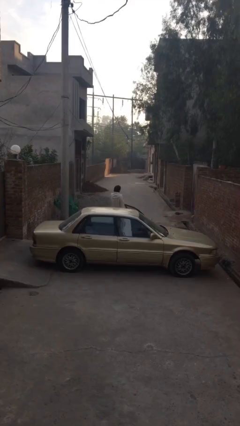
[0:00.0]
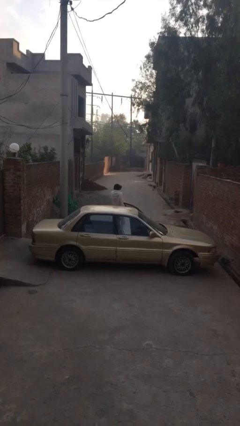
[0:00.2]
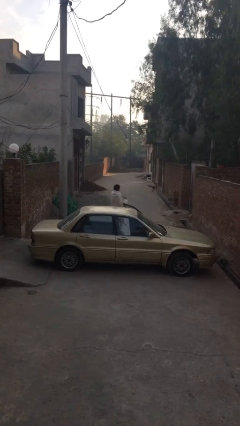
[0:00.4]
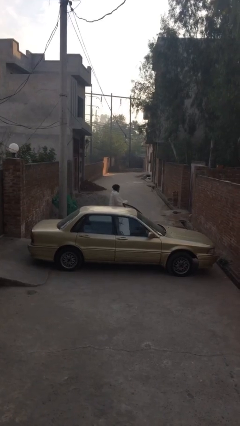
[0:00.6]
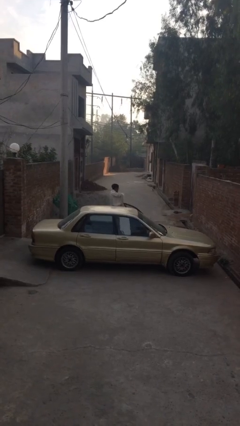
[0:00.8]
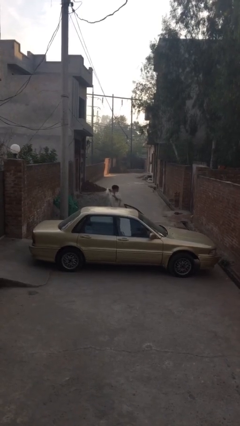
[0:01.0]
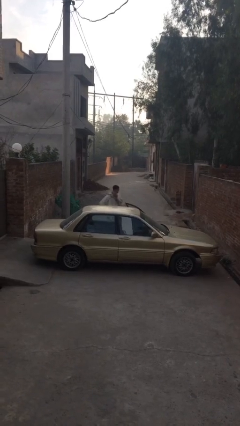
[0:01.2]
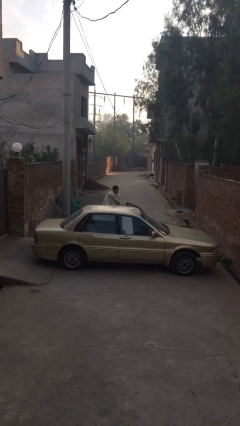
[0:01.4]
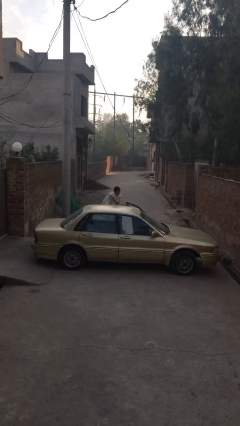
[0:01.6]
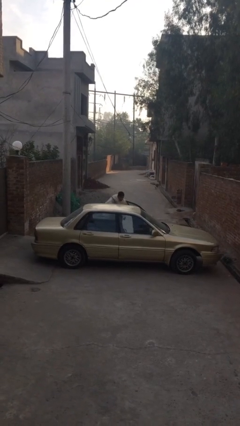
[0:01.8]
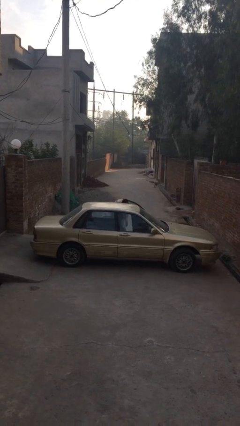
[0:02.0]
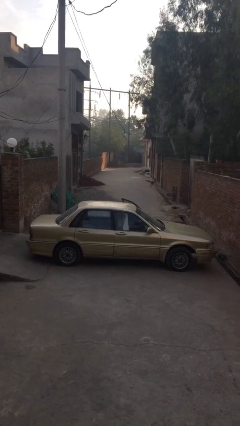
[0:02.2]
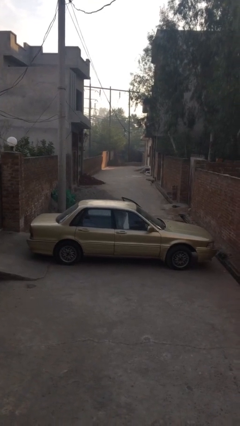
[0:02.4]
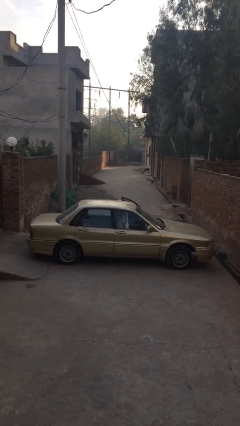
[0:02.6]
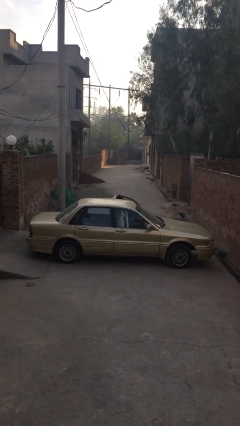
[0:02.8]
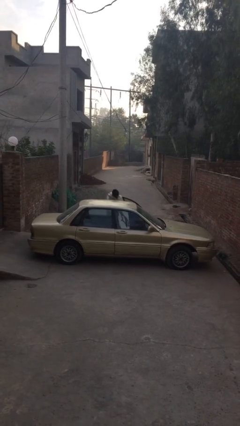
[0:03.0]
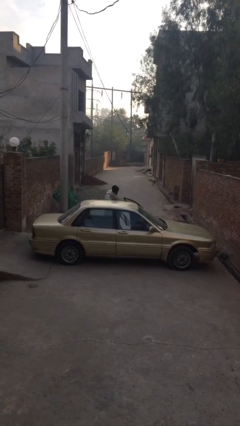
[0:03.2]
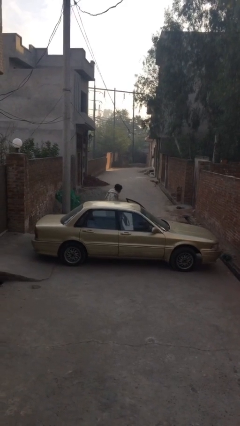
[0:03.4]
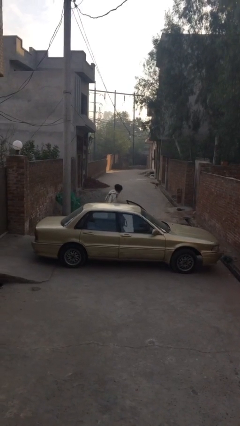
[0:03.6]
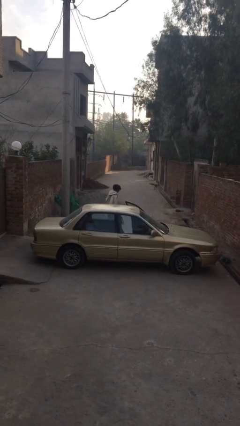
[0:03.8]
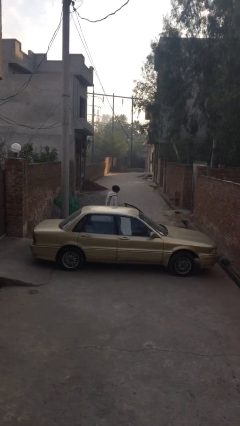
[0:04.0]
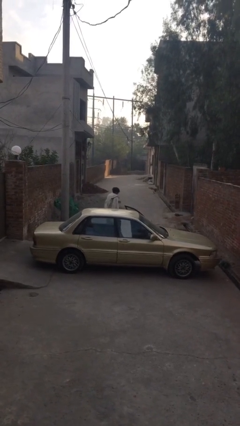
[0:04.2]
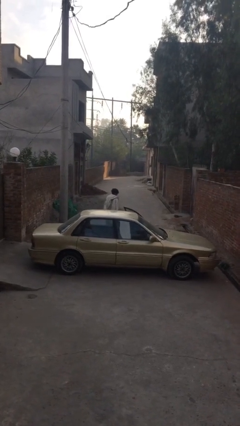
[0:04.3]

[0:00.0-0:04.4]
person unloads car

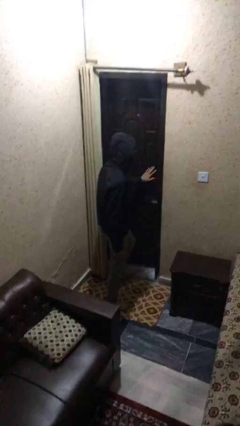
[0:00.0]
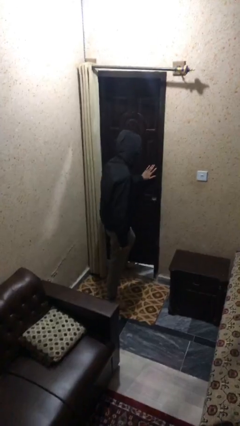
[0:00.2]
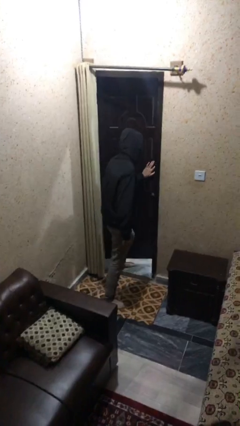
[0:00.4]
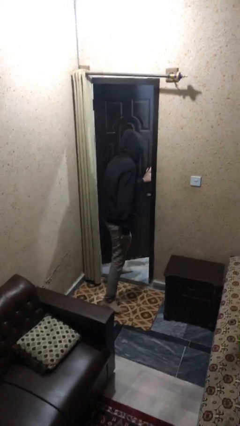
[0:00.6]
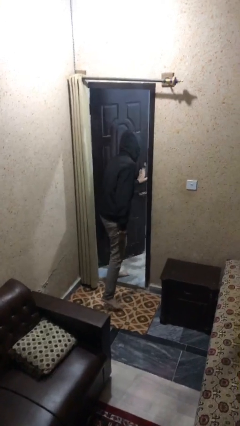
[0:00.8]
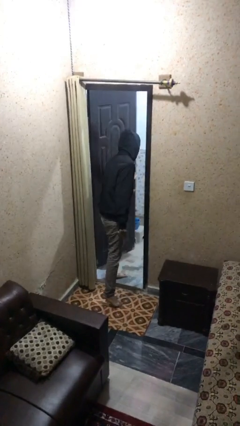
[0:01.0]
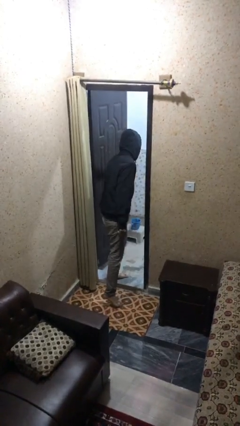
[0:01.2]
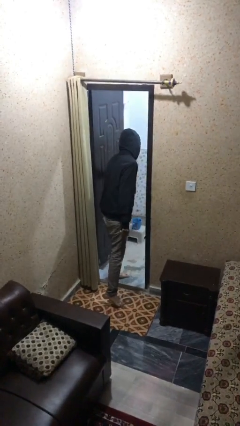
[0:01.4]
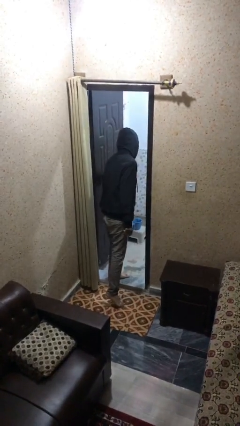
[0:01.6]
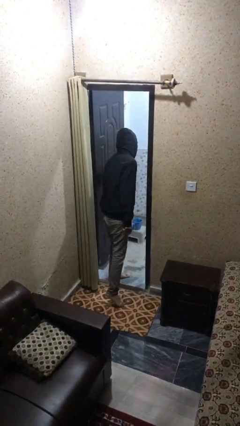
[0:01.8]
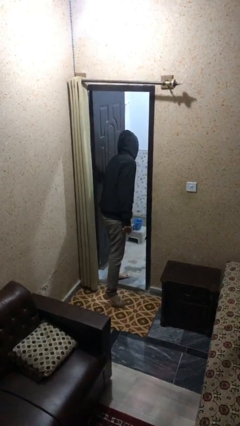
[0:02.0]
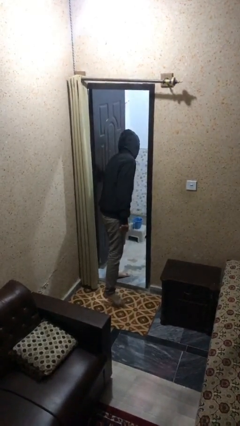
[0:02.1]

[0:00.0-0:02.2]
person opens facility door

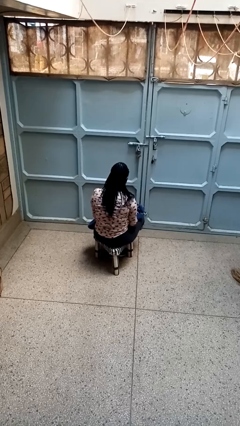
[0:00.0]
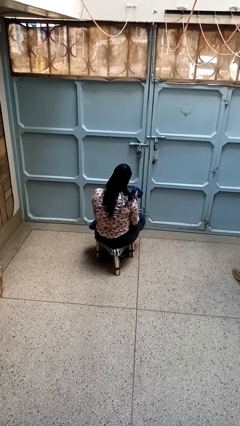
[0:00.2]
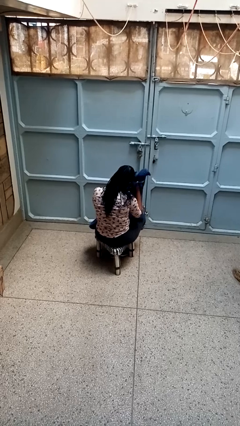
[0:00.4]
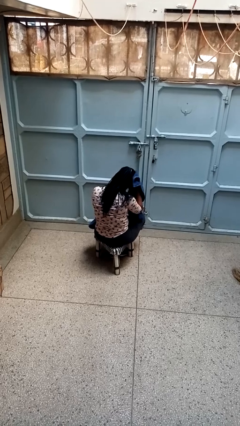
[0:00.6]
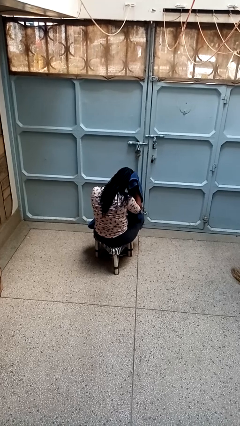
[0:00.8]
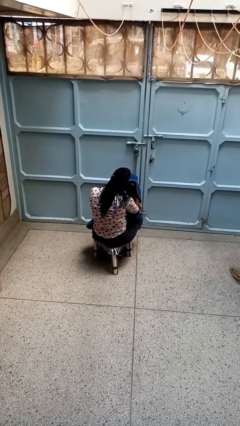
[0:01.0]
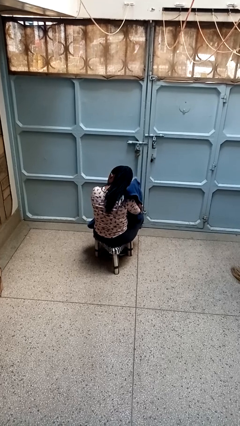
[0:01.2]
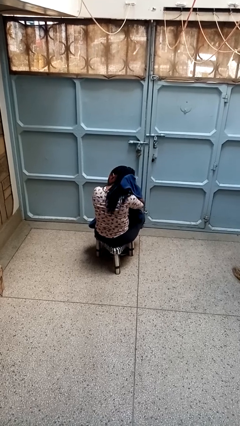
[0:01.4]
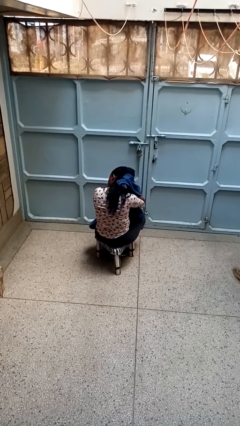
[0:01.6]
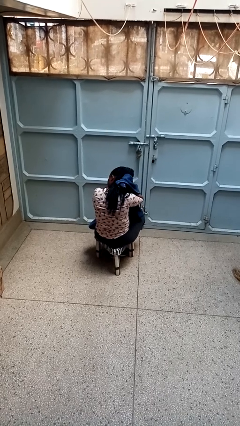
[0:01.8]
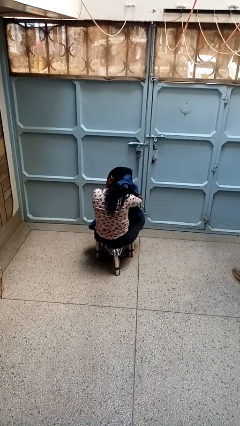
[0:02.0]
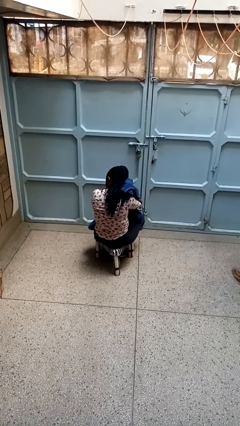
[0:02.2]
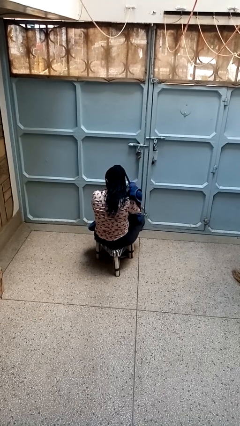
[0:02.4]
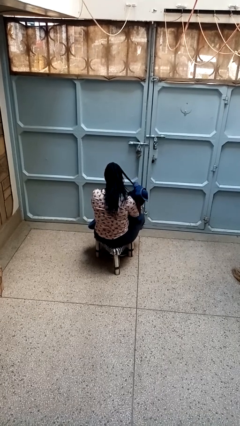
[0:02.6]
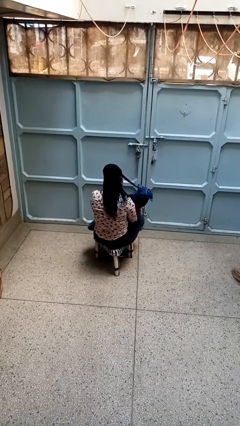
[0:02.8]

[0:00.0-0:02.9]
person dries hair with towel

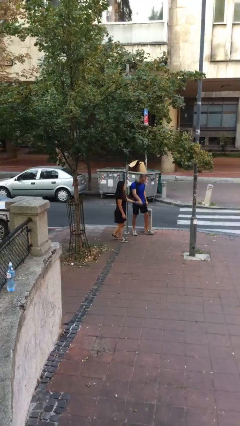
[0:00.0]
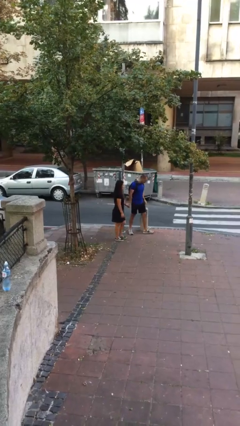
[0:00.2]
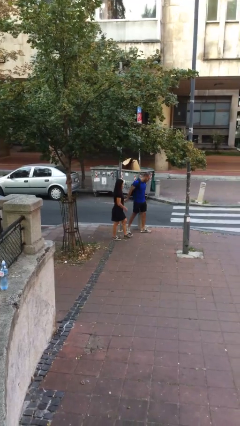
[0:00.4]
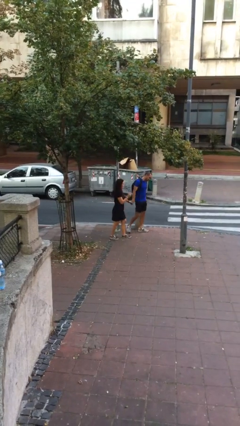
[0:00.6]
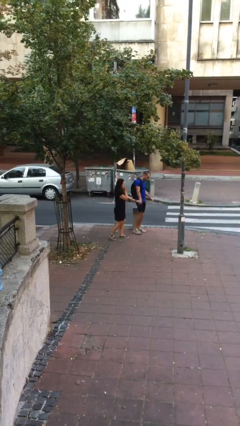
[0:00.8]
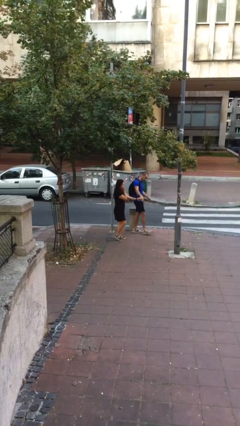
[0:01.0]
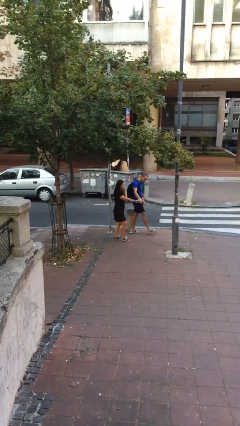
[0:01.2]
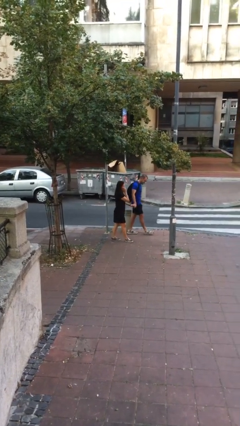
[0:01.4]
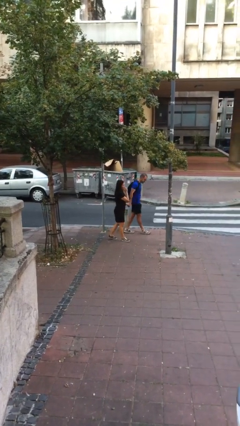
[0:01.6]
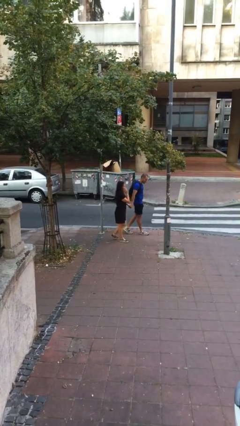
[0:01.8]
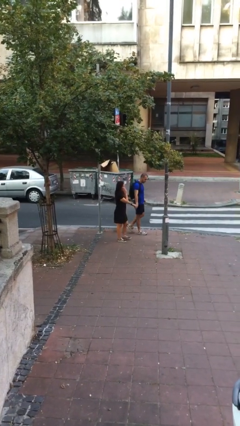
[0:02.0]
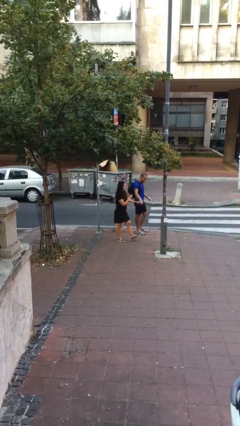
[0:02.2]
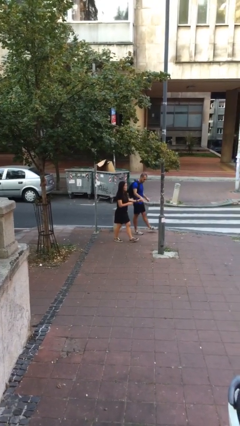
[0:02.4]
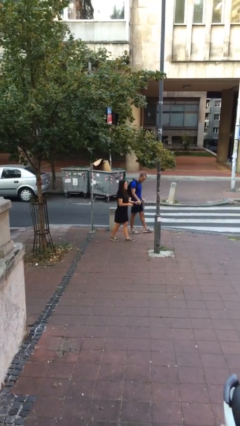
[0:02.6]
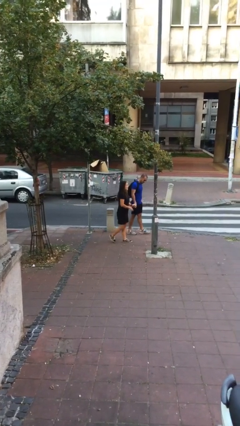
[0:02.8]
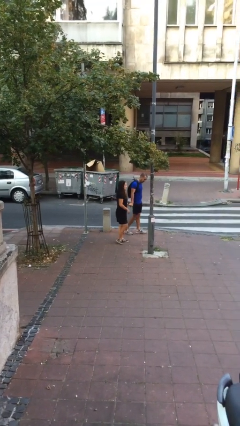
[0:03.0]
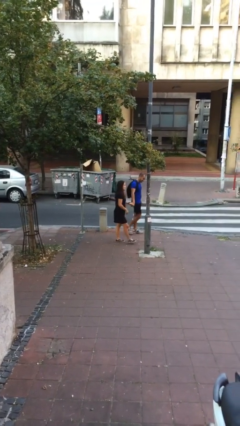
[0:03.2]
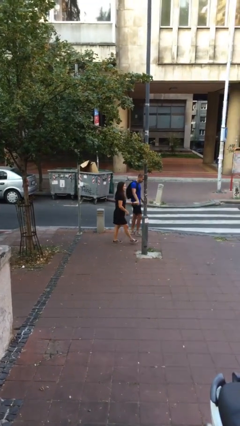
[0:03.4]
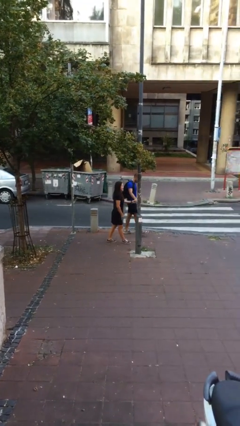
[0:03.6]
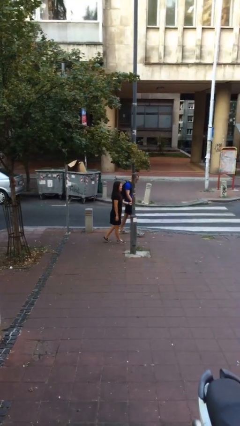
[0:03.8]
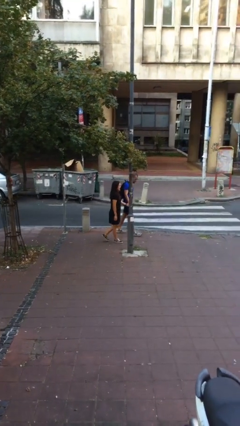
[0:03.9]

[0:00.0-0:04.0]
person holds hand

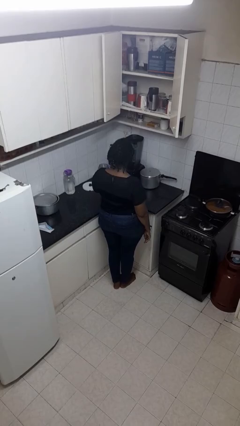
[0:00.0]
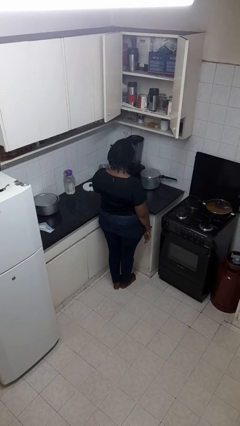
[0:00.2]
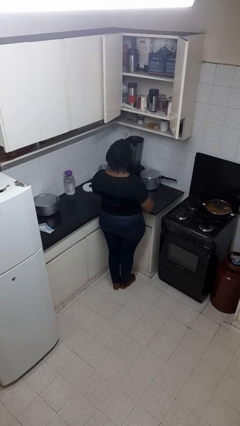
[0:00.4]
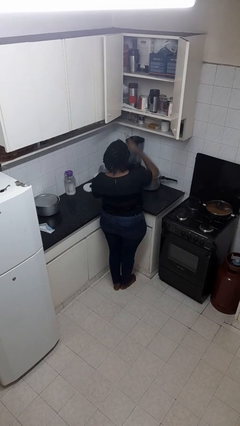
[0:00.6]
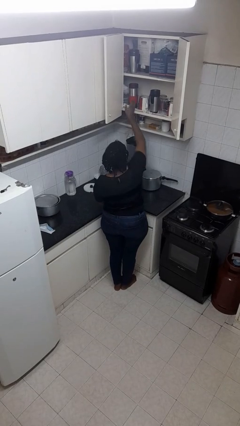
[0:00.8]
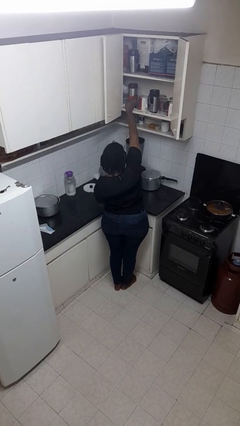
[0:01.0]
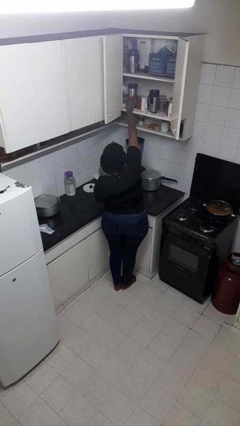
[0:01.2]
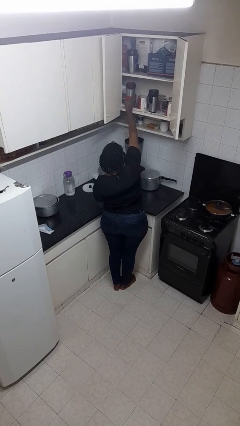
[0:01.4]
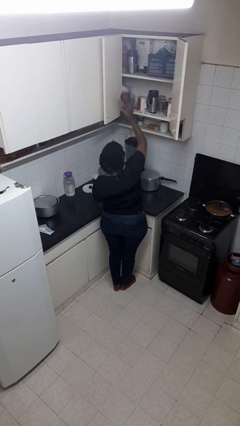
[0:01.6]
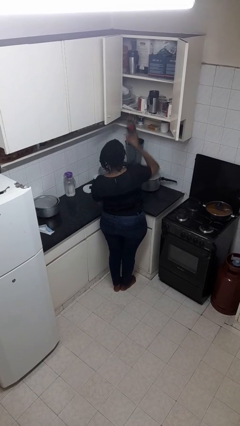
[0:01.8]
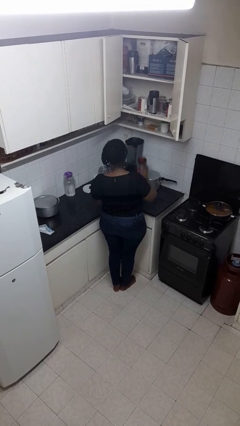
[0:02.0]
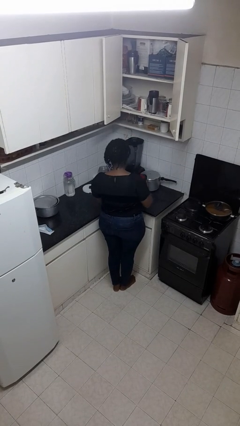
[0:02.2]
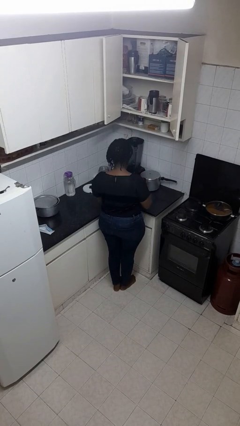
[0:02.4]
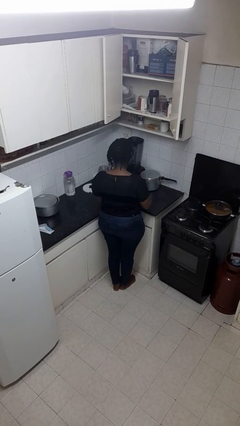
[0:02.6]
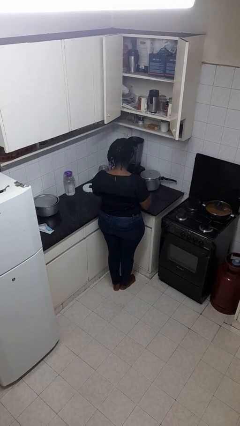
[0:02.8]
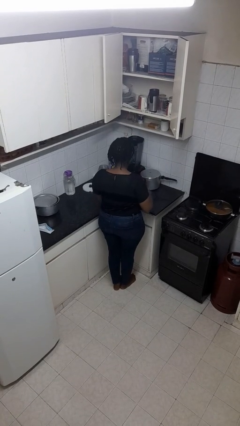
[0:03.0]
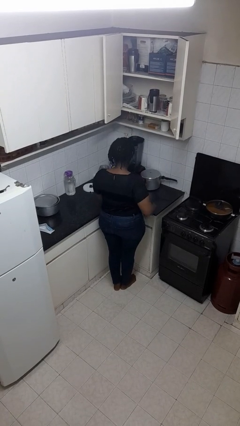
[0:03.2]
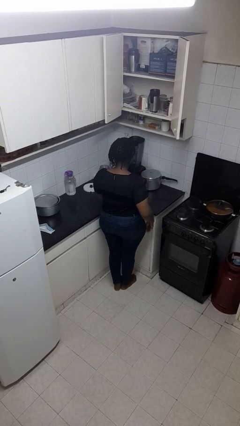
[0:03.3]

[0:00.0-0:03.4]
person takes object from cabinet

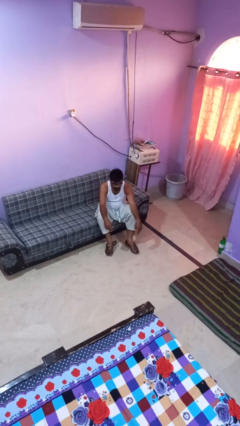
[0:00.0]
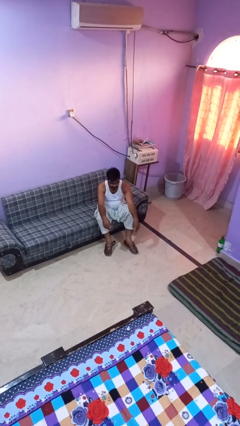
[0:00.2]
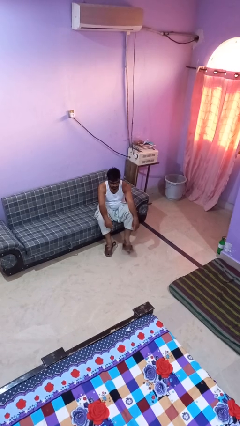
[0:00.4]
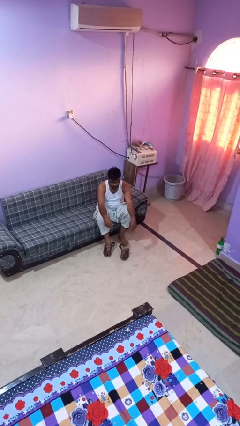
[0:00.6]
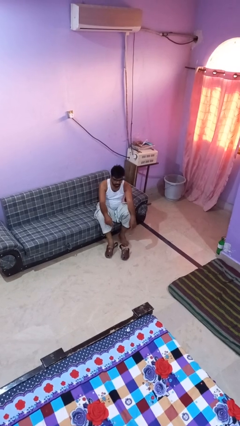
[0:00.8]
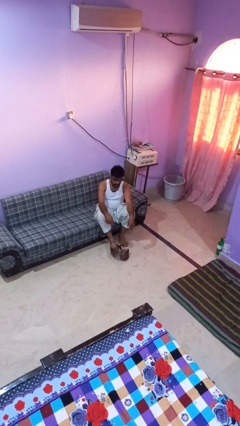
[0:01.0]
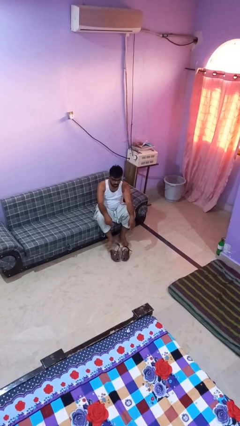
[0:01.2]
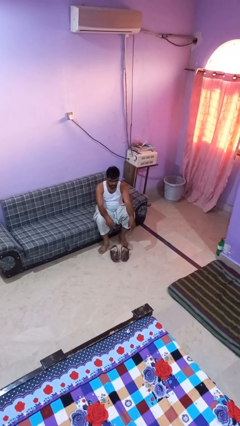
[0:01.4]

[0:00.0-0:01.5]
person takes off shoes
